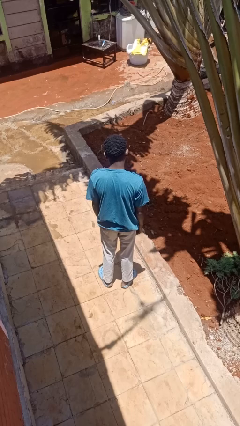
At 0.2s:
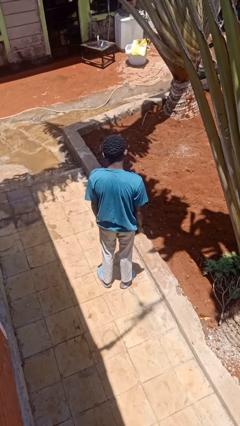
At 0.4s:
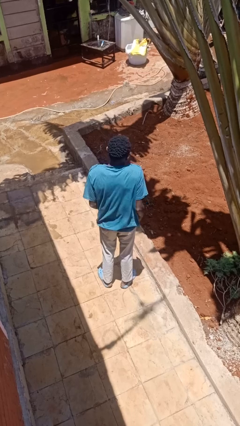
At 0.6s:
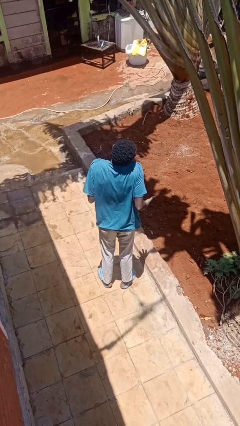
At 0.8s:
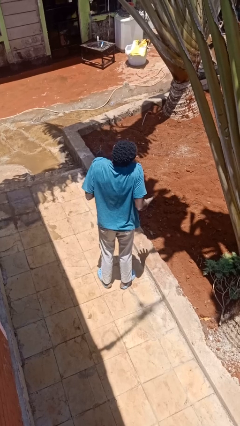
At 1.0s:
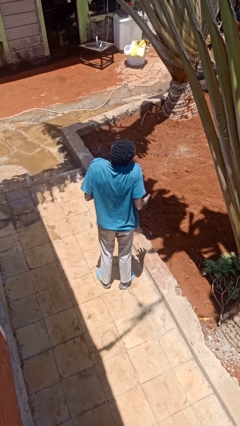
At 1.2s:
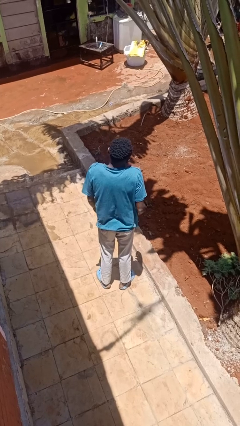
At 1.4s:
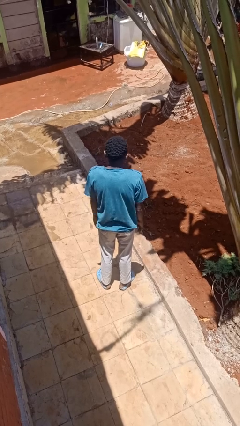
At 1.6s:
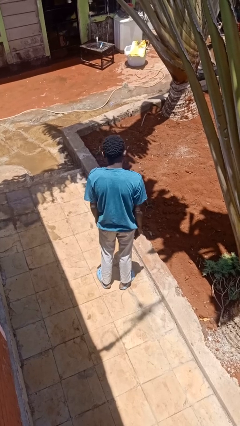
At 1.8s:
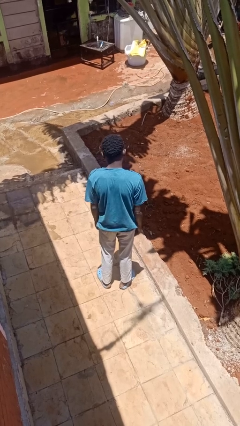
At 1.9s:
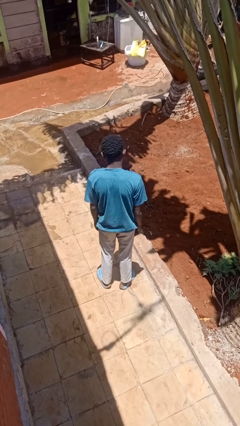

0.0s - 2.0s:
person shrugs

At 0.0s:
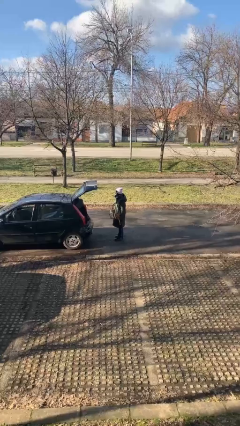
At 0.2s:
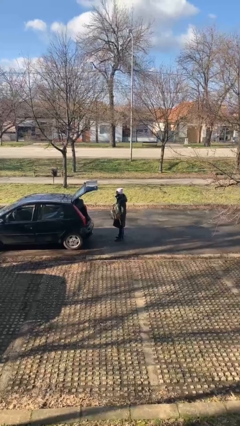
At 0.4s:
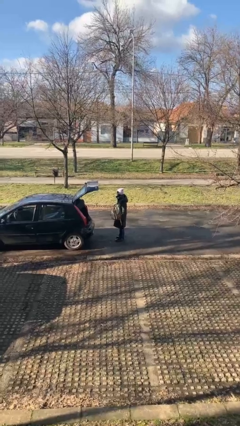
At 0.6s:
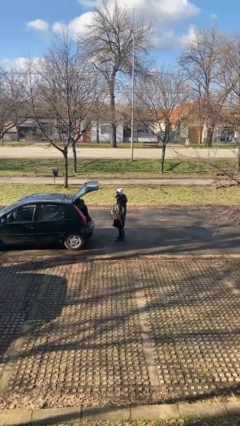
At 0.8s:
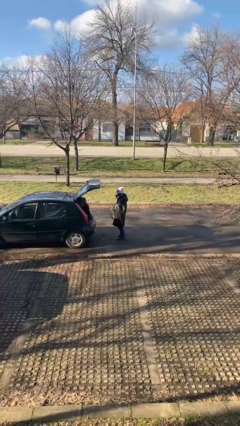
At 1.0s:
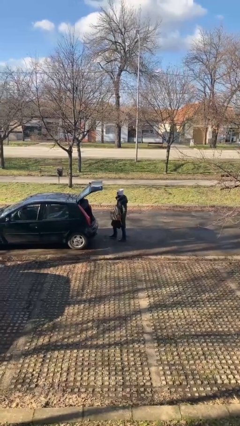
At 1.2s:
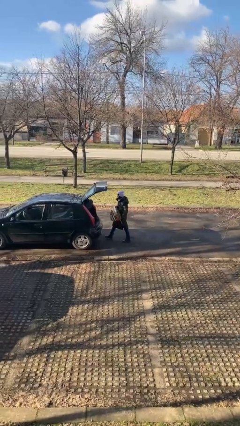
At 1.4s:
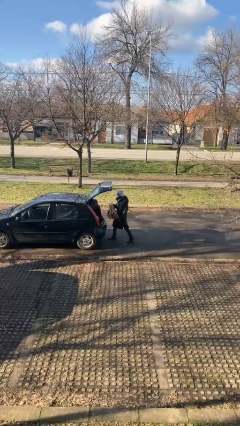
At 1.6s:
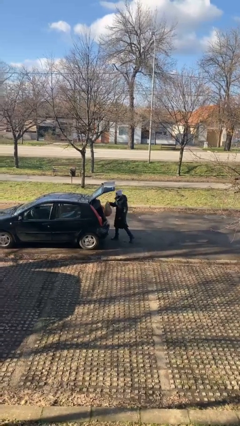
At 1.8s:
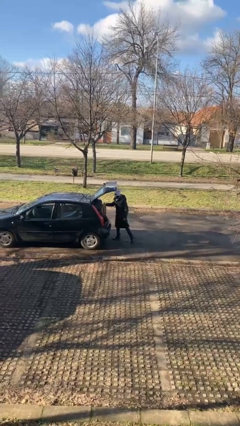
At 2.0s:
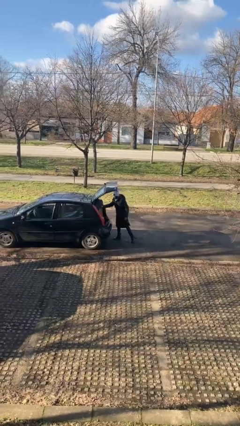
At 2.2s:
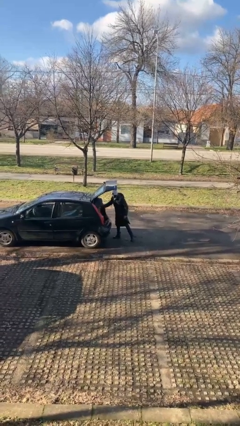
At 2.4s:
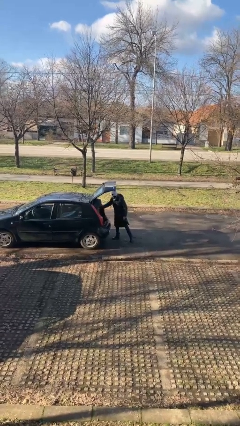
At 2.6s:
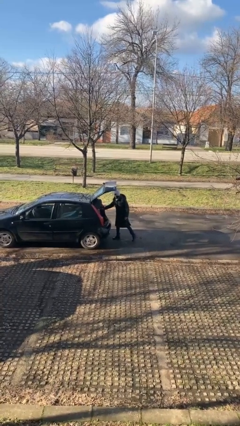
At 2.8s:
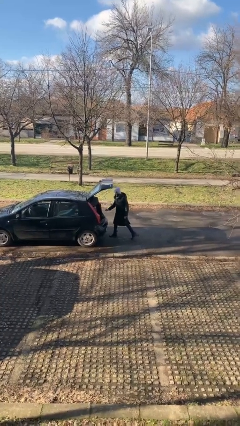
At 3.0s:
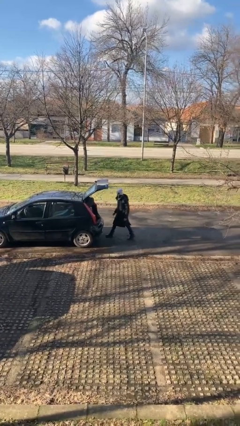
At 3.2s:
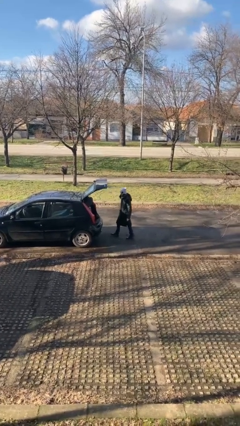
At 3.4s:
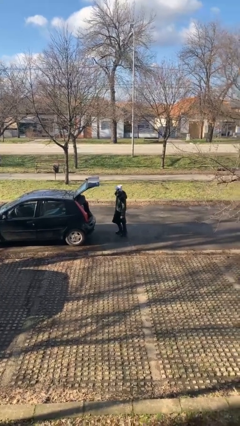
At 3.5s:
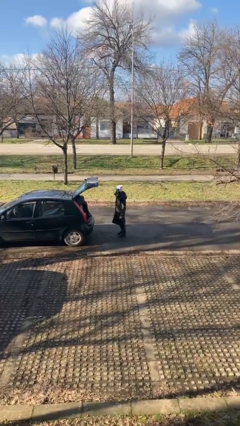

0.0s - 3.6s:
person loads car

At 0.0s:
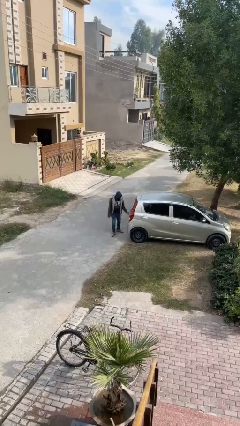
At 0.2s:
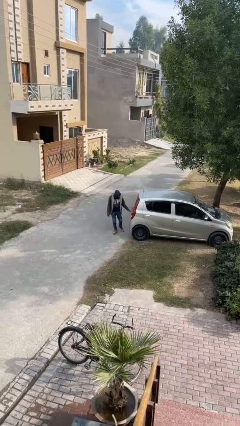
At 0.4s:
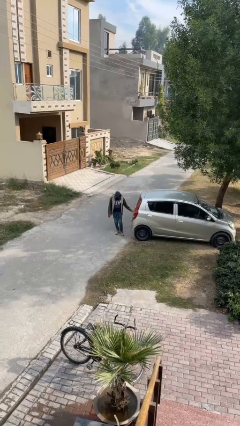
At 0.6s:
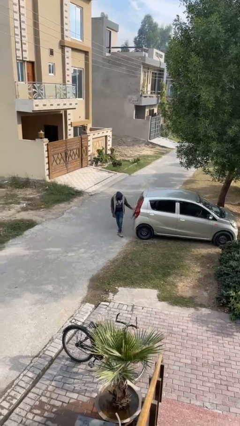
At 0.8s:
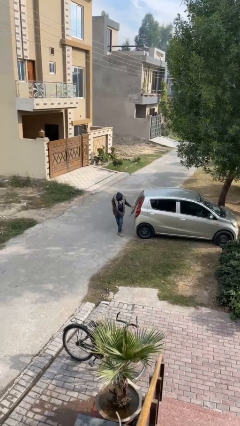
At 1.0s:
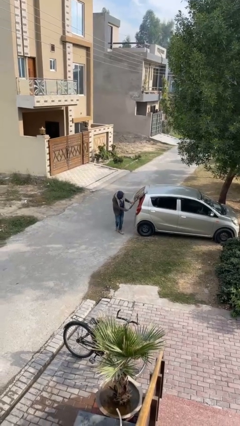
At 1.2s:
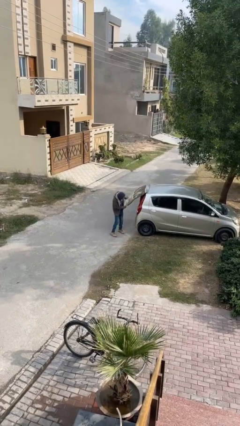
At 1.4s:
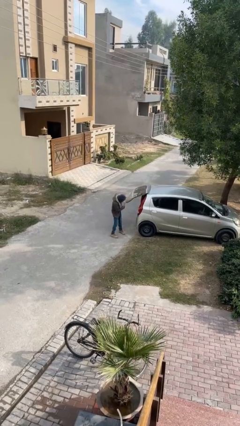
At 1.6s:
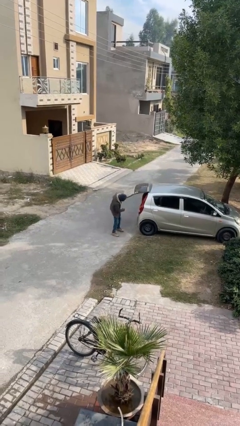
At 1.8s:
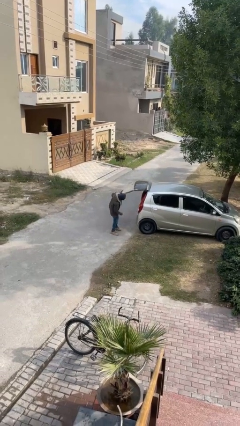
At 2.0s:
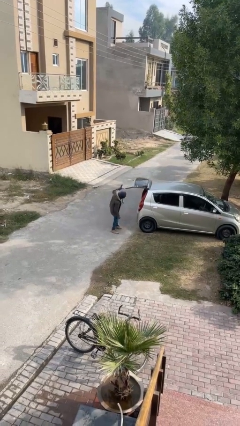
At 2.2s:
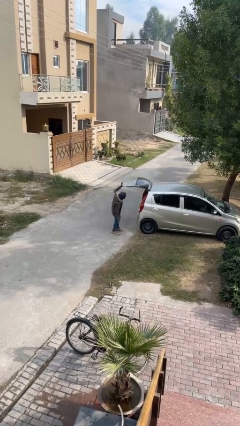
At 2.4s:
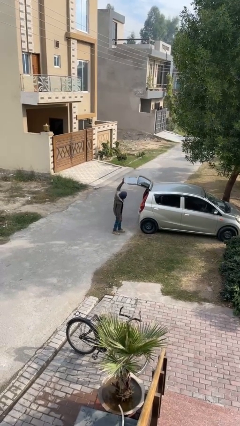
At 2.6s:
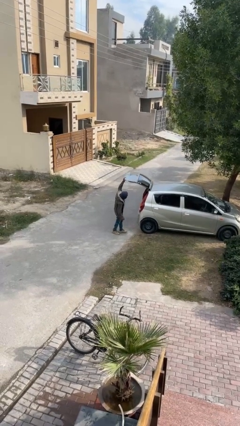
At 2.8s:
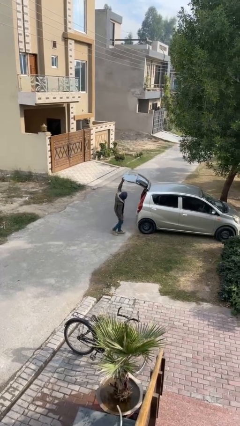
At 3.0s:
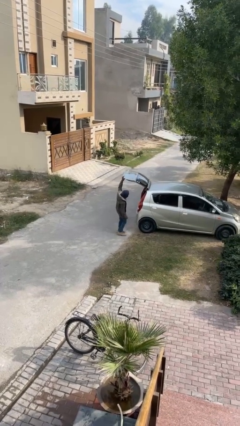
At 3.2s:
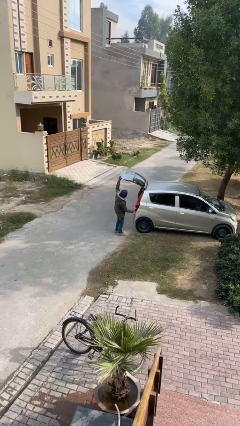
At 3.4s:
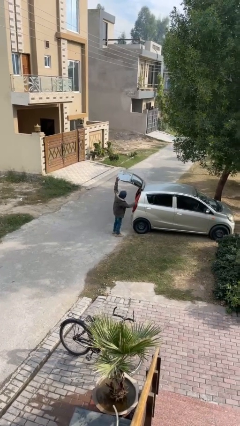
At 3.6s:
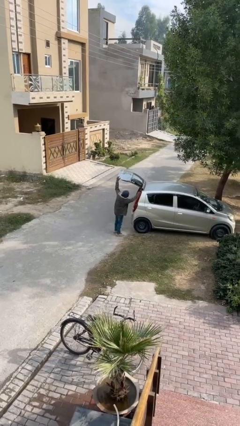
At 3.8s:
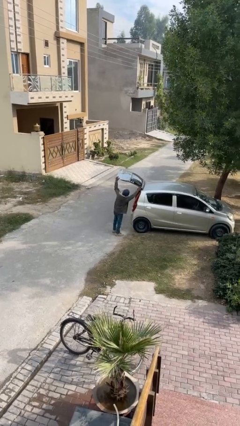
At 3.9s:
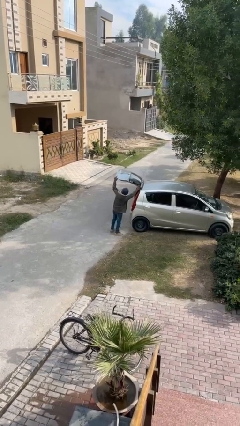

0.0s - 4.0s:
person opens car trunk

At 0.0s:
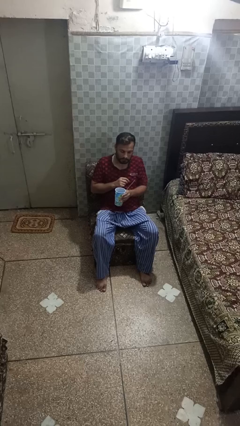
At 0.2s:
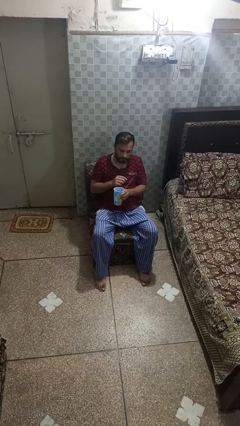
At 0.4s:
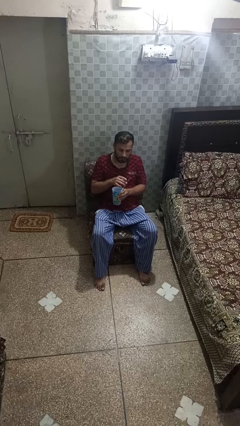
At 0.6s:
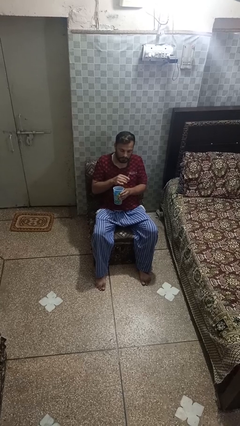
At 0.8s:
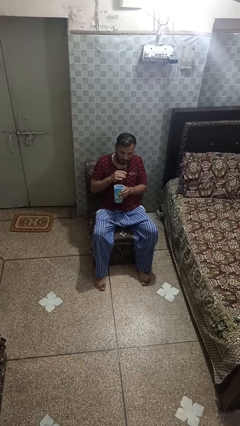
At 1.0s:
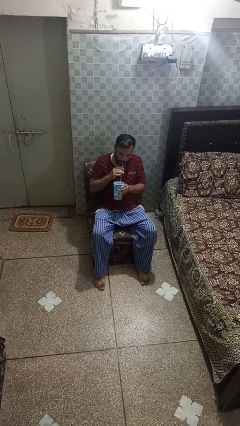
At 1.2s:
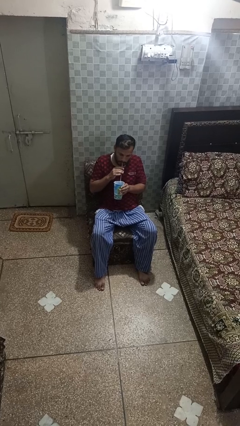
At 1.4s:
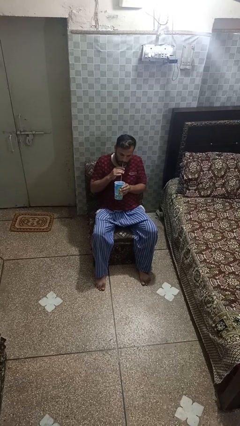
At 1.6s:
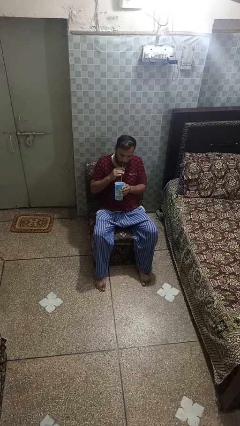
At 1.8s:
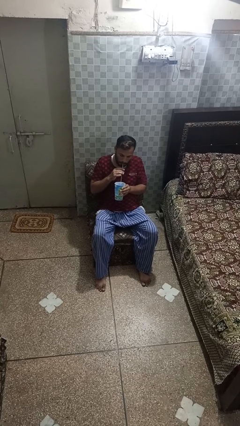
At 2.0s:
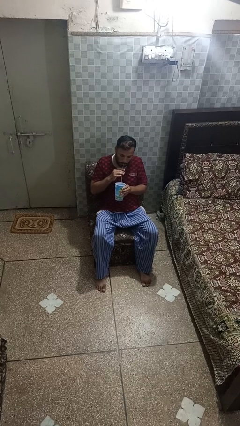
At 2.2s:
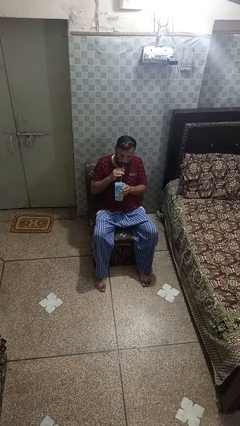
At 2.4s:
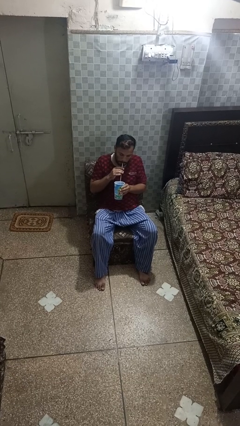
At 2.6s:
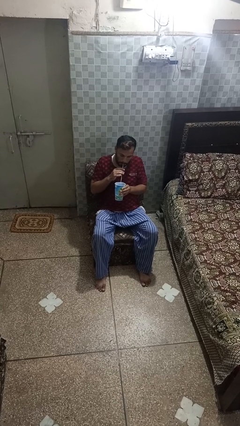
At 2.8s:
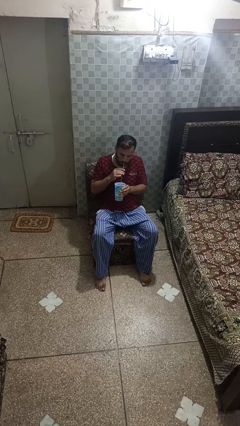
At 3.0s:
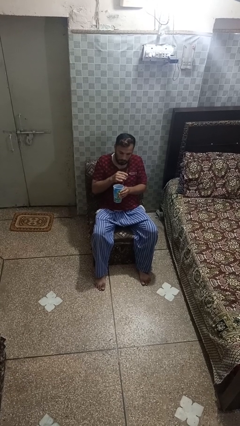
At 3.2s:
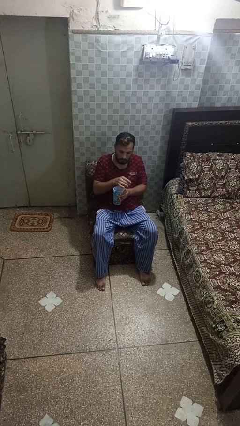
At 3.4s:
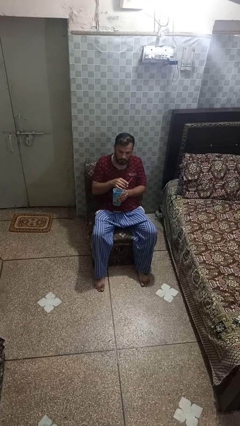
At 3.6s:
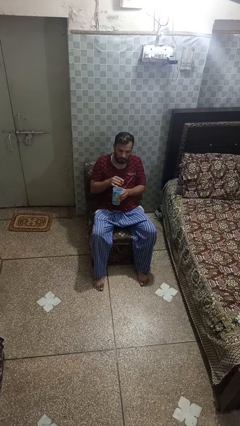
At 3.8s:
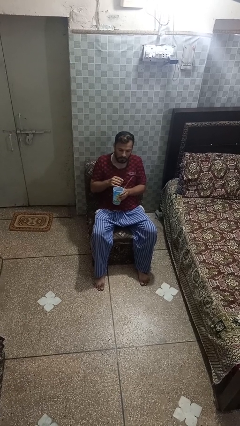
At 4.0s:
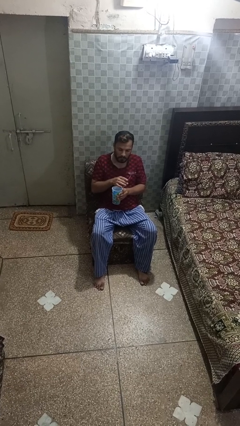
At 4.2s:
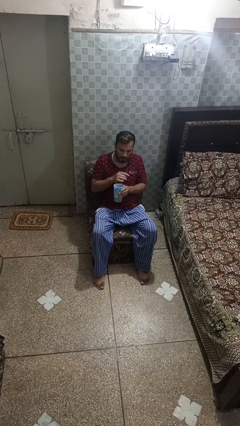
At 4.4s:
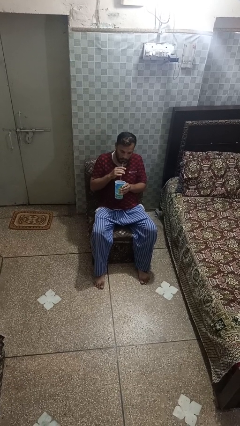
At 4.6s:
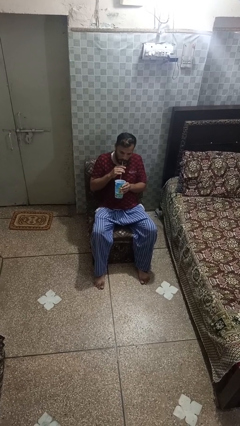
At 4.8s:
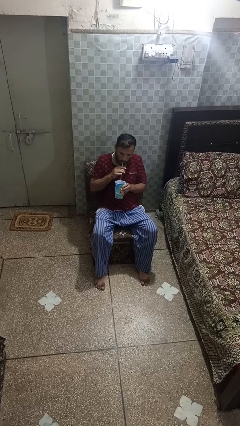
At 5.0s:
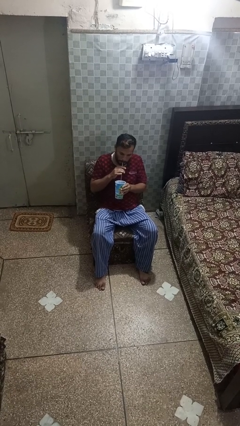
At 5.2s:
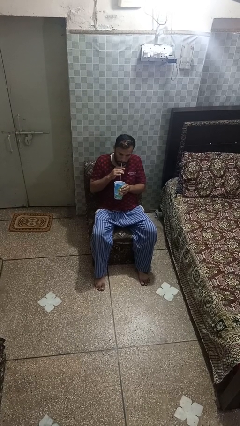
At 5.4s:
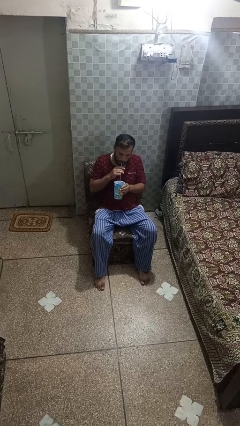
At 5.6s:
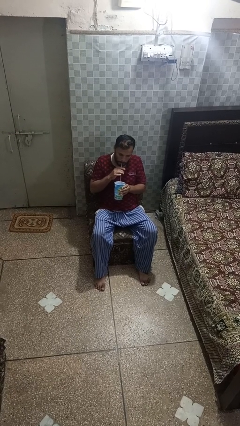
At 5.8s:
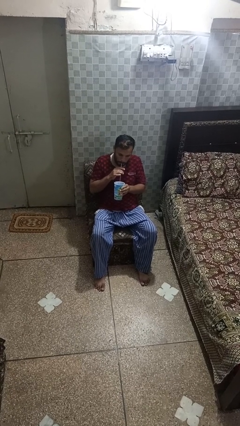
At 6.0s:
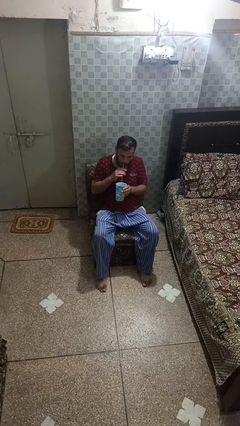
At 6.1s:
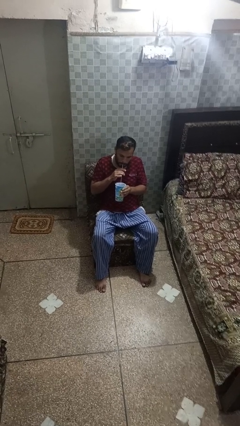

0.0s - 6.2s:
person drinks from straw

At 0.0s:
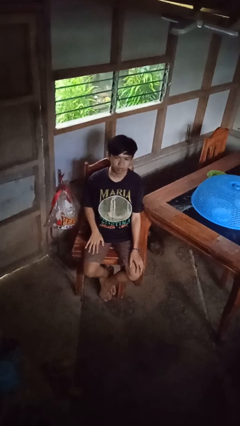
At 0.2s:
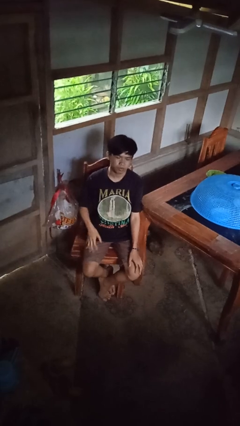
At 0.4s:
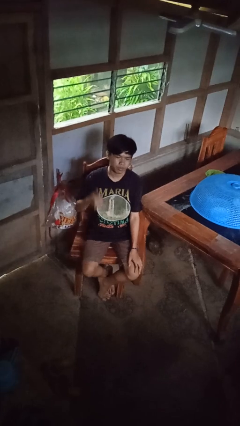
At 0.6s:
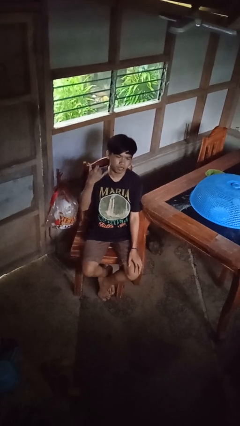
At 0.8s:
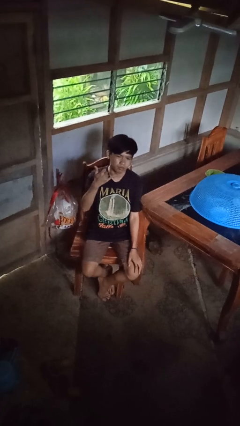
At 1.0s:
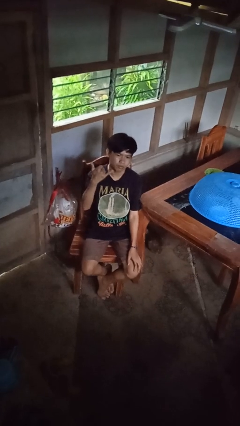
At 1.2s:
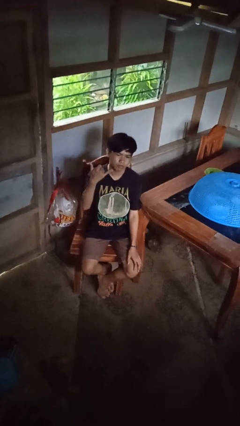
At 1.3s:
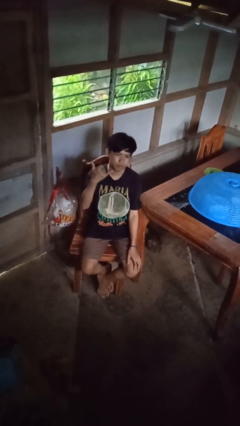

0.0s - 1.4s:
person gestures hang loose

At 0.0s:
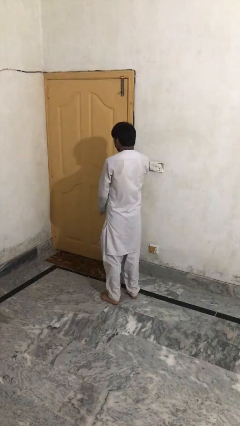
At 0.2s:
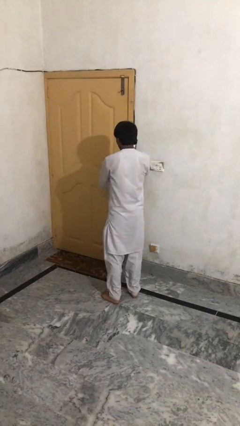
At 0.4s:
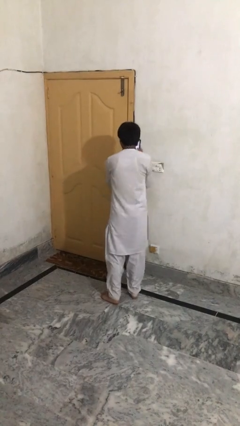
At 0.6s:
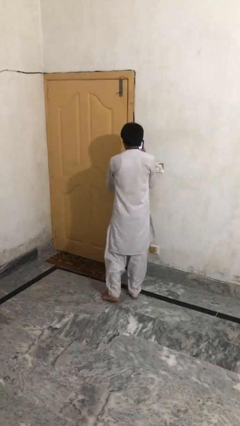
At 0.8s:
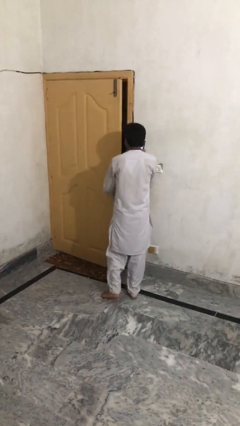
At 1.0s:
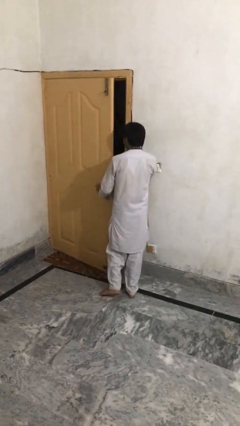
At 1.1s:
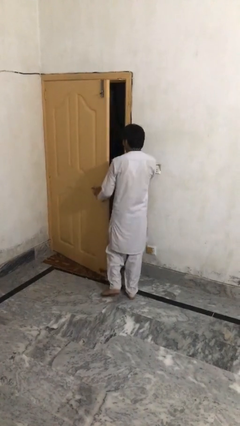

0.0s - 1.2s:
person opens facility door
